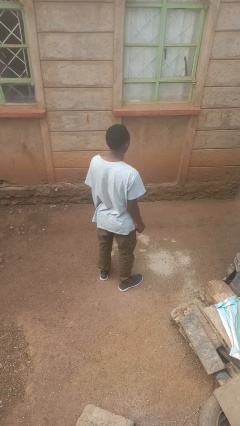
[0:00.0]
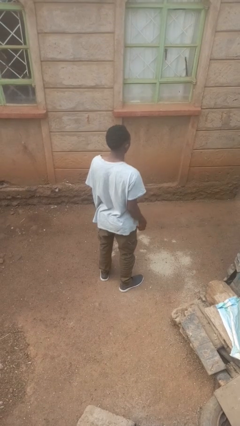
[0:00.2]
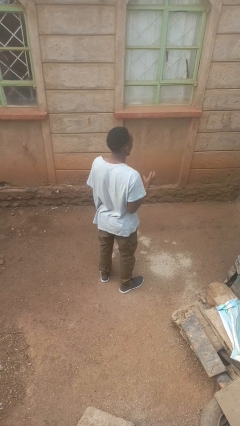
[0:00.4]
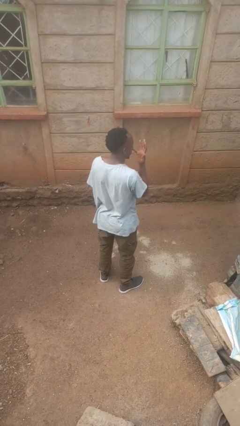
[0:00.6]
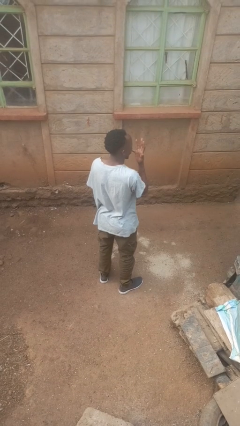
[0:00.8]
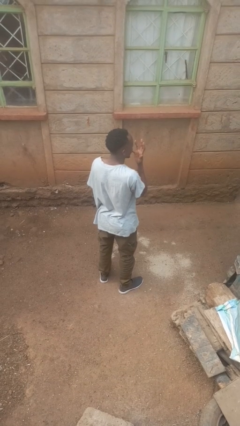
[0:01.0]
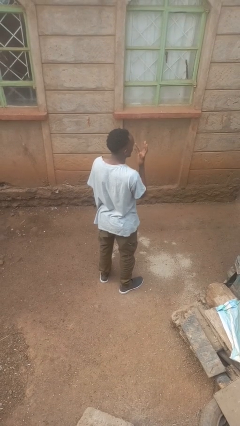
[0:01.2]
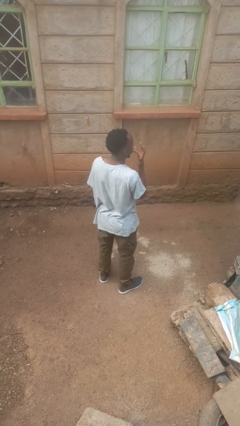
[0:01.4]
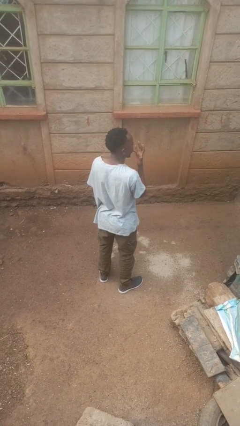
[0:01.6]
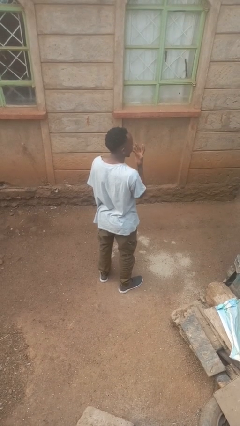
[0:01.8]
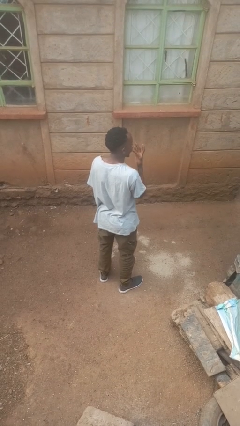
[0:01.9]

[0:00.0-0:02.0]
person licks fingers

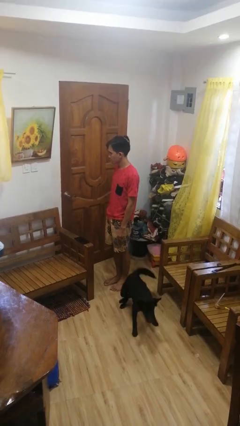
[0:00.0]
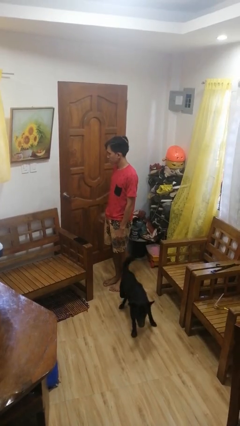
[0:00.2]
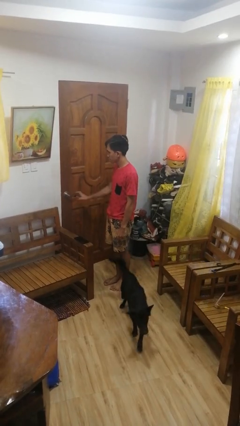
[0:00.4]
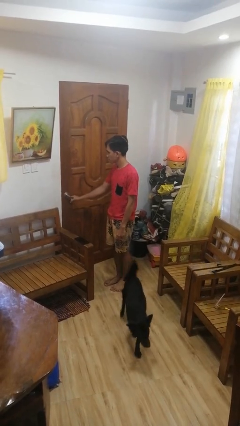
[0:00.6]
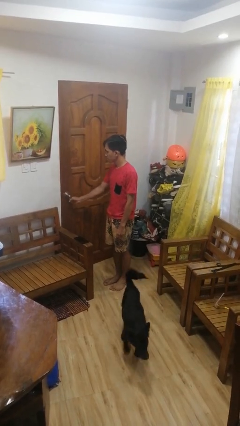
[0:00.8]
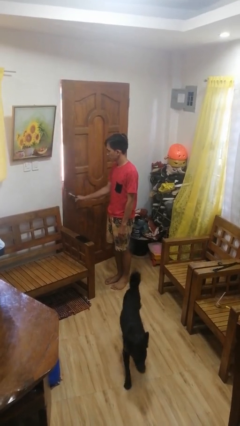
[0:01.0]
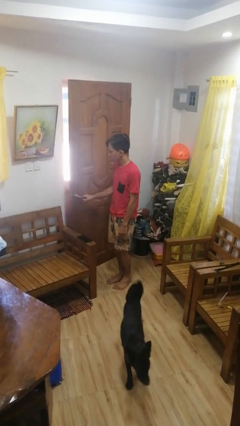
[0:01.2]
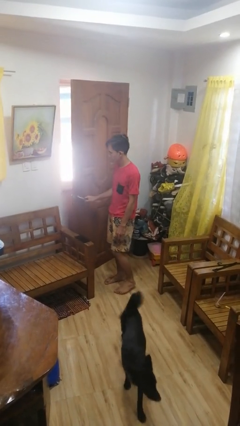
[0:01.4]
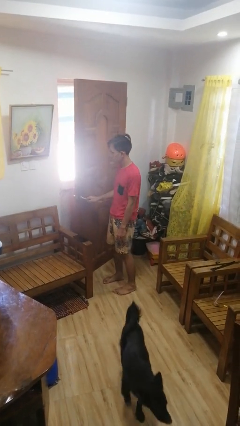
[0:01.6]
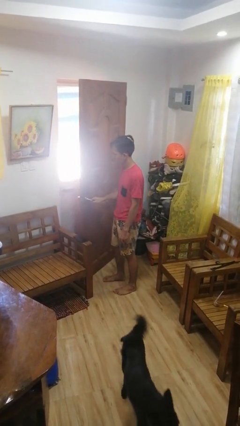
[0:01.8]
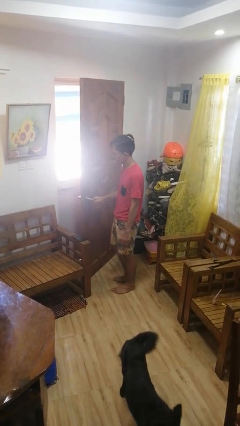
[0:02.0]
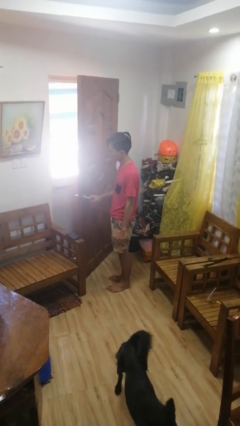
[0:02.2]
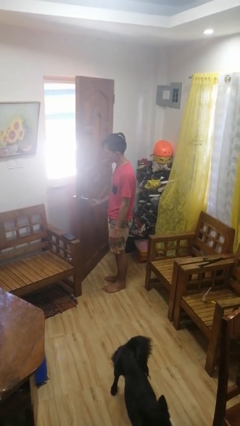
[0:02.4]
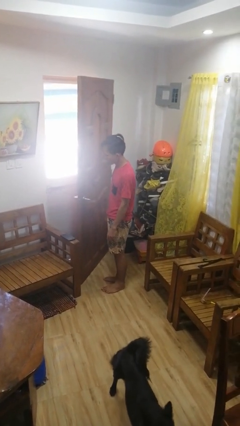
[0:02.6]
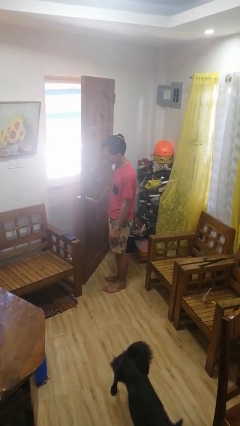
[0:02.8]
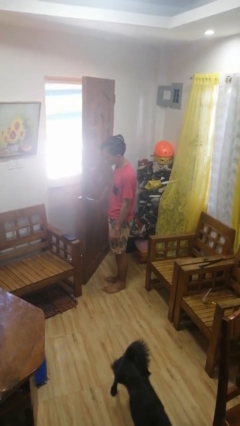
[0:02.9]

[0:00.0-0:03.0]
person opens facility door

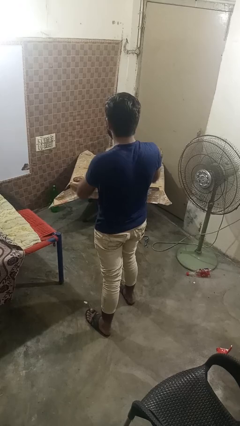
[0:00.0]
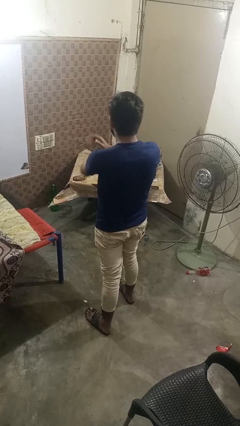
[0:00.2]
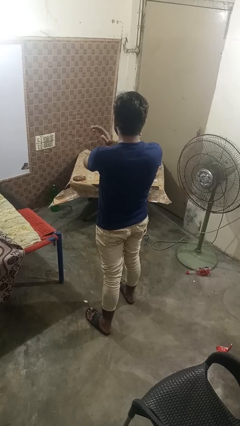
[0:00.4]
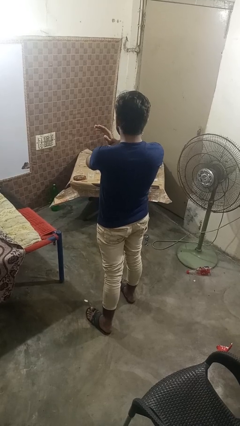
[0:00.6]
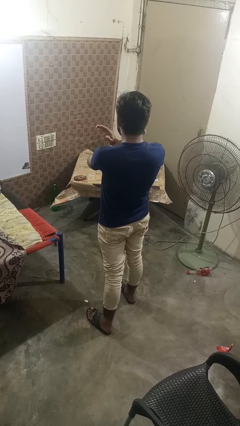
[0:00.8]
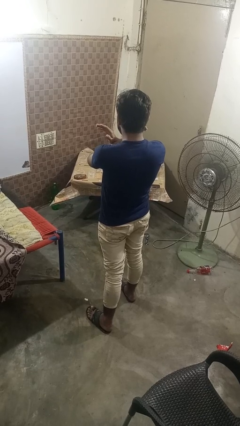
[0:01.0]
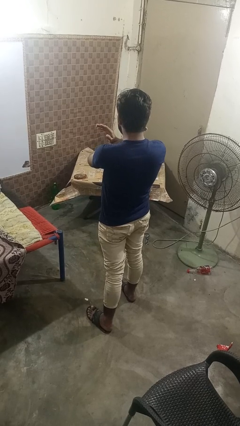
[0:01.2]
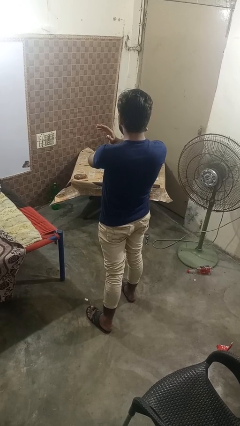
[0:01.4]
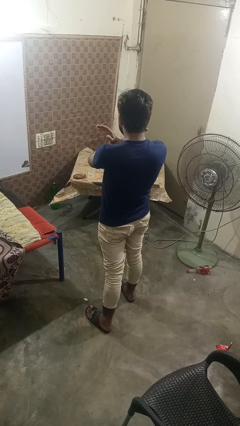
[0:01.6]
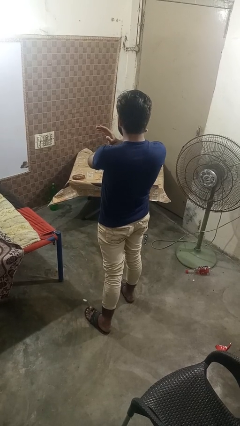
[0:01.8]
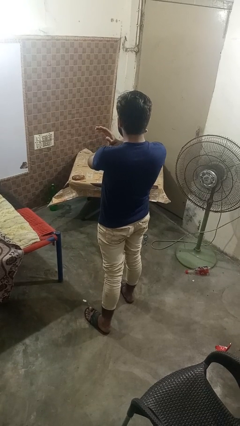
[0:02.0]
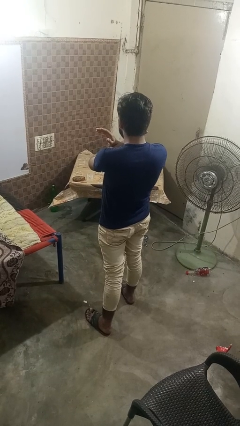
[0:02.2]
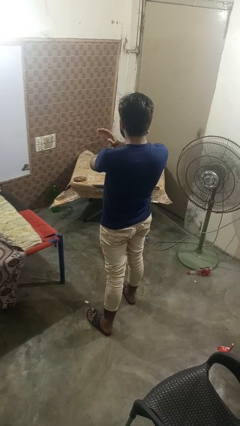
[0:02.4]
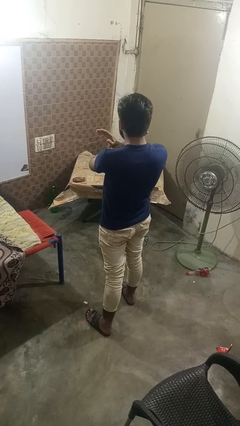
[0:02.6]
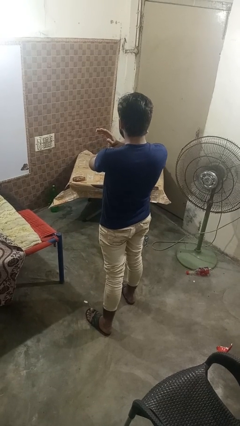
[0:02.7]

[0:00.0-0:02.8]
person karate chop

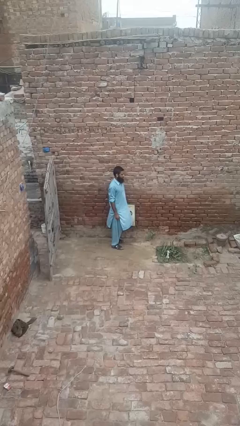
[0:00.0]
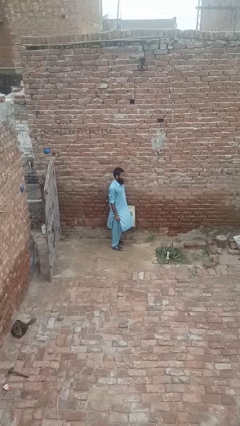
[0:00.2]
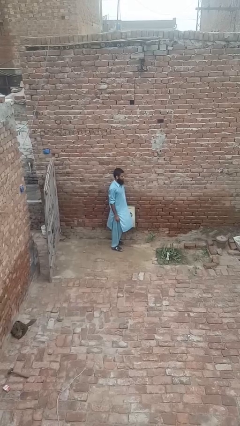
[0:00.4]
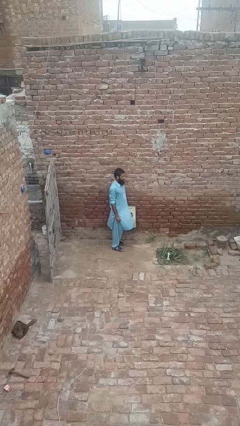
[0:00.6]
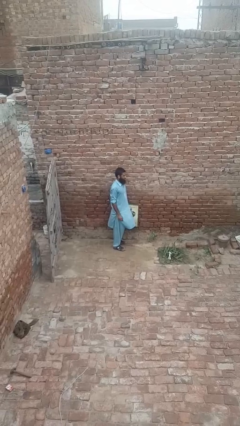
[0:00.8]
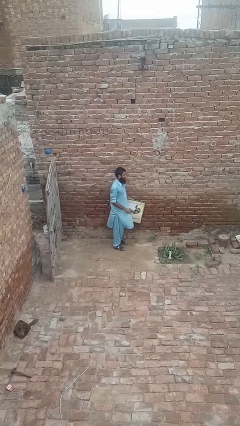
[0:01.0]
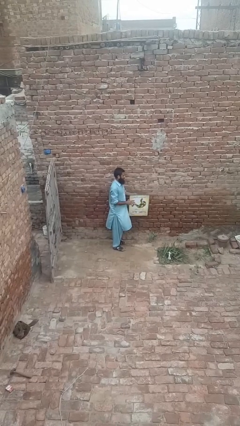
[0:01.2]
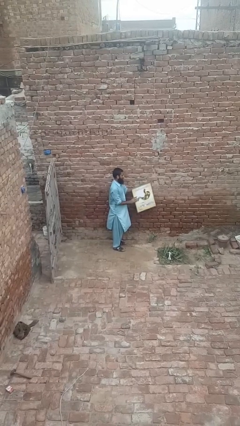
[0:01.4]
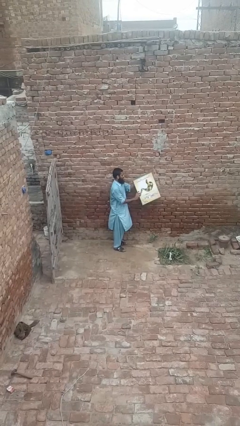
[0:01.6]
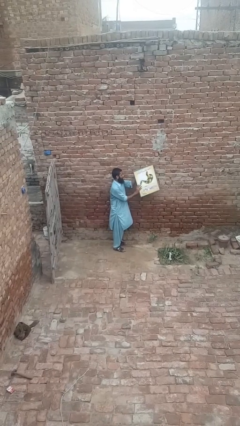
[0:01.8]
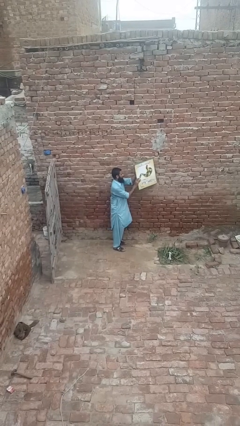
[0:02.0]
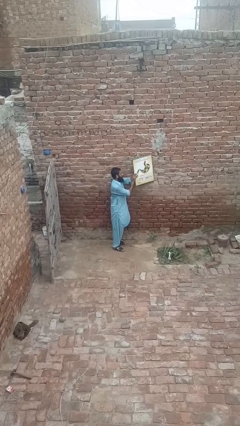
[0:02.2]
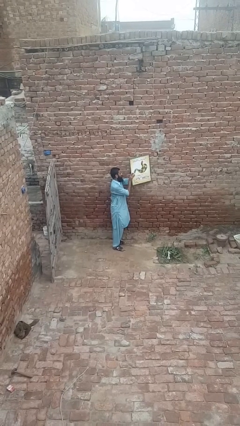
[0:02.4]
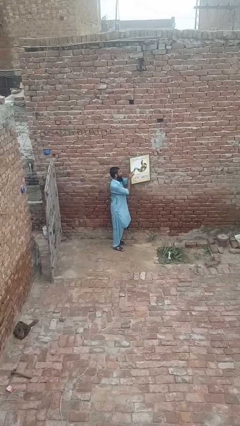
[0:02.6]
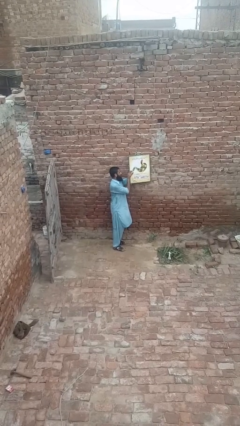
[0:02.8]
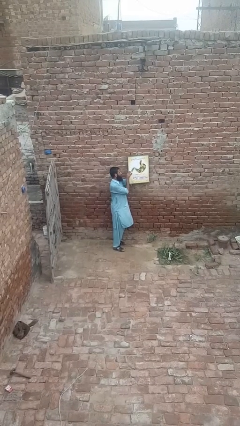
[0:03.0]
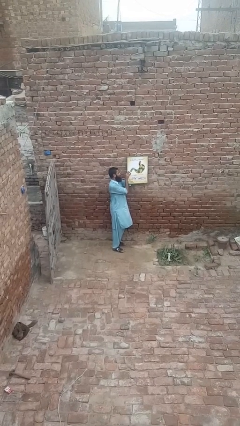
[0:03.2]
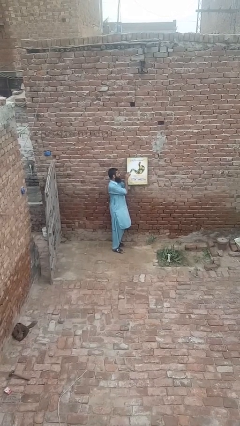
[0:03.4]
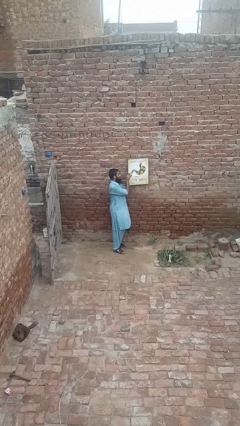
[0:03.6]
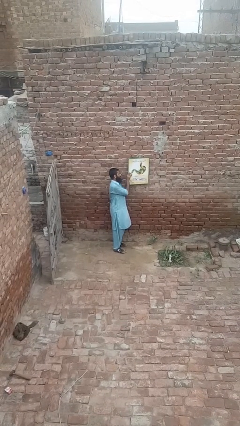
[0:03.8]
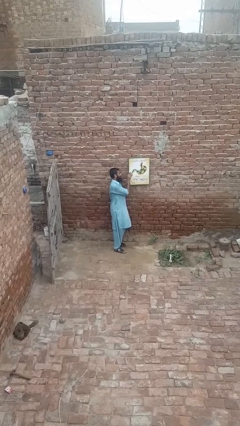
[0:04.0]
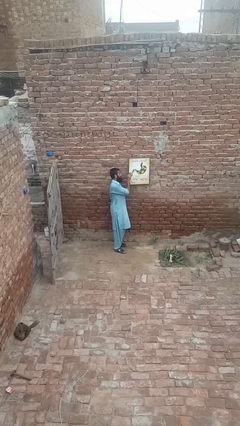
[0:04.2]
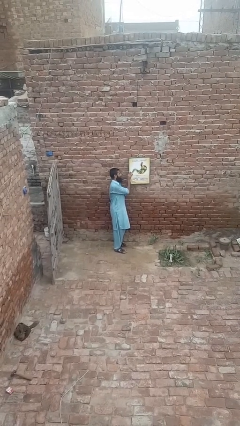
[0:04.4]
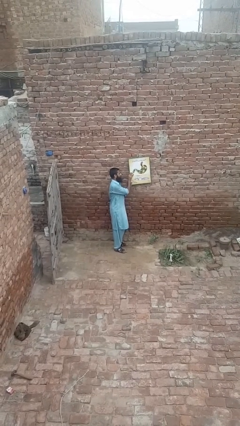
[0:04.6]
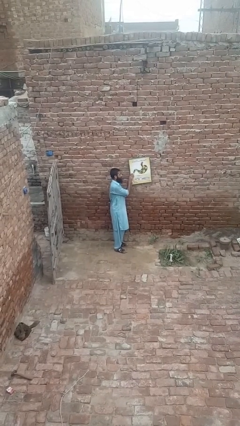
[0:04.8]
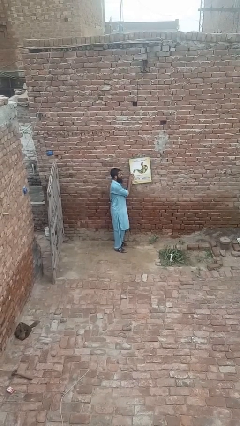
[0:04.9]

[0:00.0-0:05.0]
person puts up picture frame

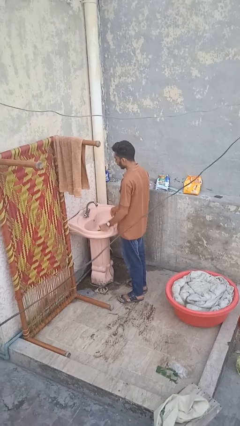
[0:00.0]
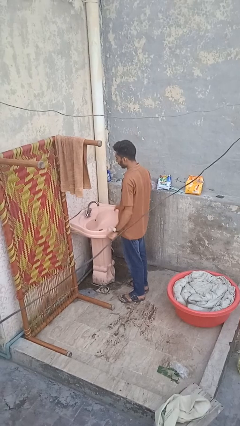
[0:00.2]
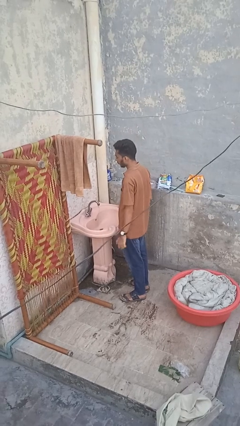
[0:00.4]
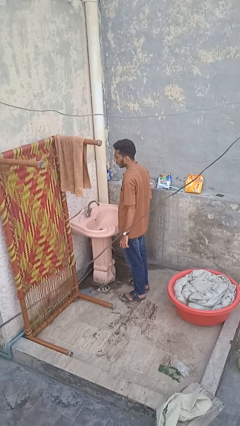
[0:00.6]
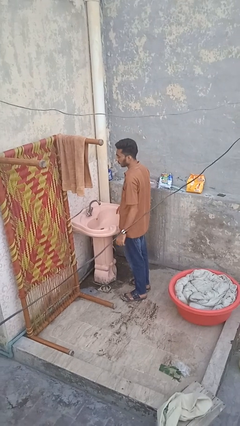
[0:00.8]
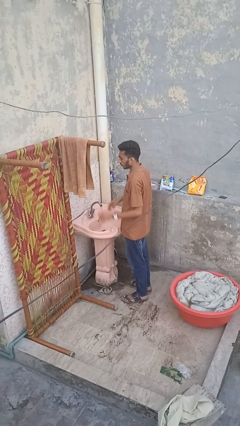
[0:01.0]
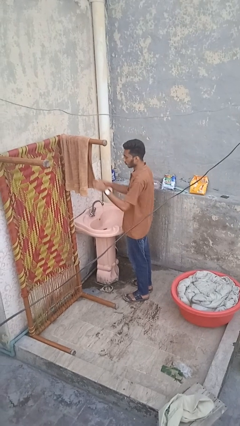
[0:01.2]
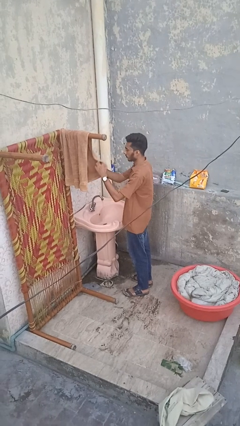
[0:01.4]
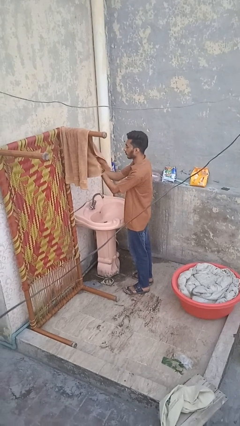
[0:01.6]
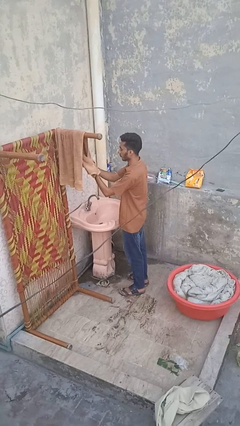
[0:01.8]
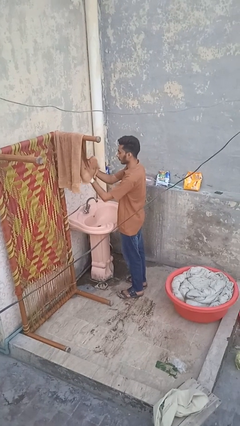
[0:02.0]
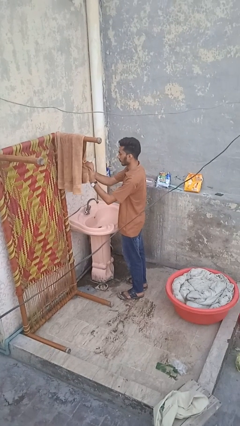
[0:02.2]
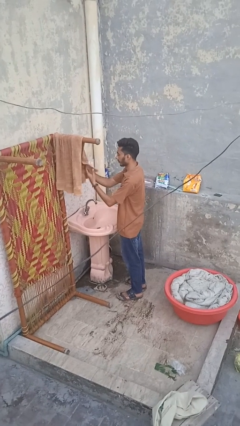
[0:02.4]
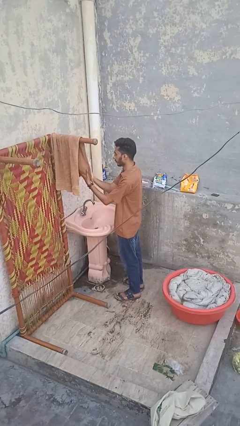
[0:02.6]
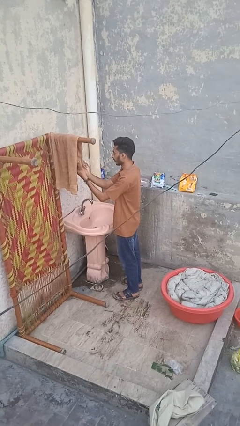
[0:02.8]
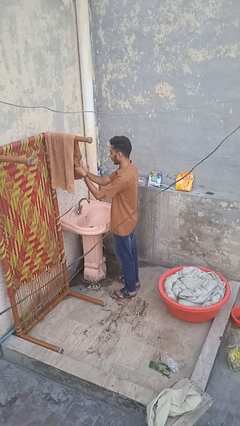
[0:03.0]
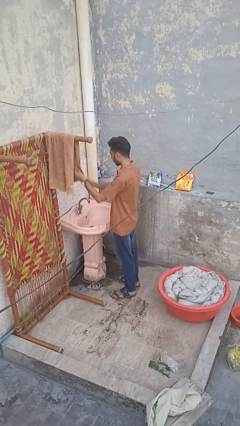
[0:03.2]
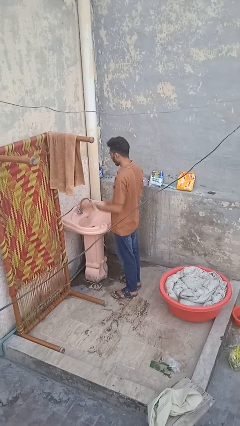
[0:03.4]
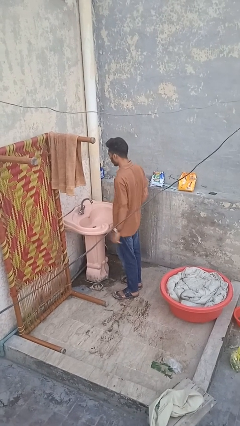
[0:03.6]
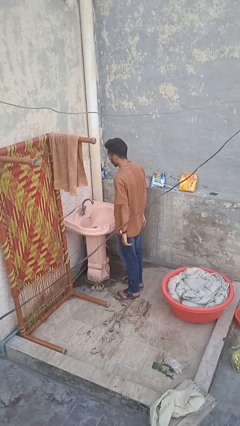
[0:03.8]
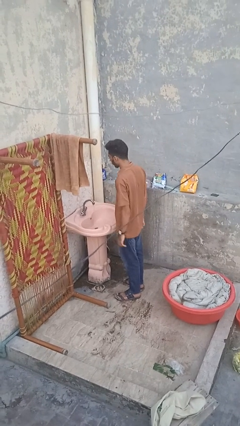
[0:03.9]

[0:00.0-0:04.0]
person dries hands with towel

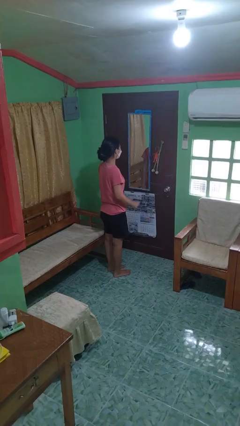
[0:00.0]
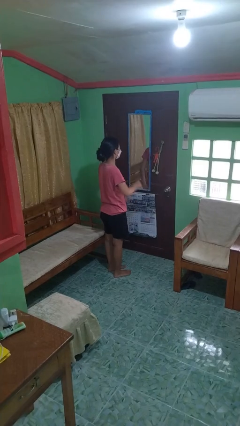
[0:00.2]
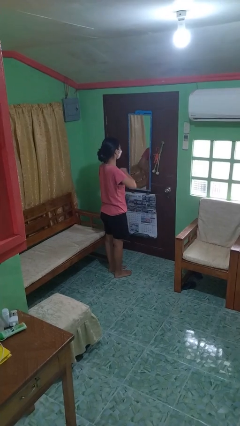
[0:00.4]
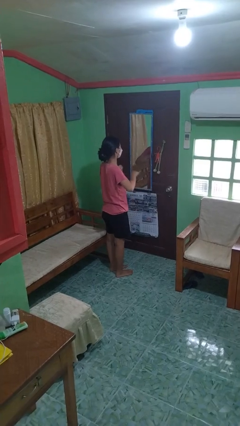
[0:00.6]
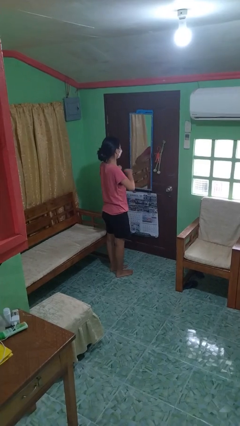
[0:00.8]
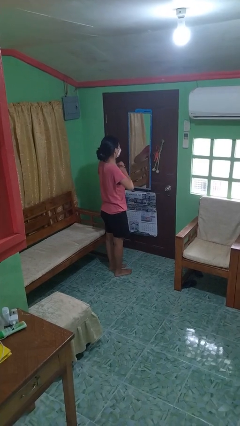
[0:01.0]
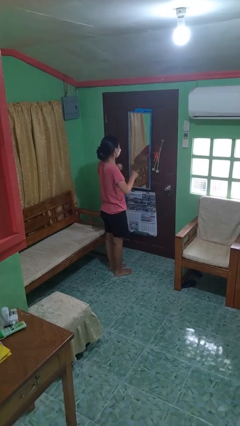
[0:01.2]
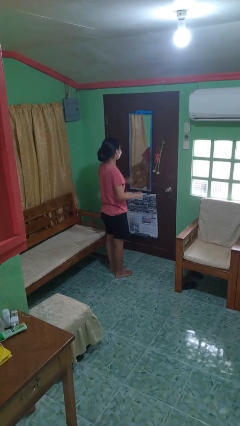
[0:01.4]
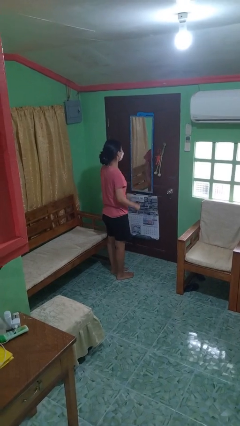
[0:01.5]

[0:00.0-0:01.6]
person drums on chest
